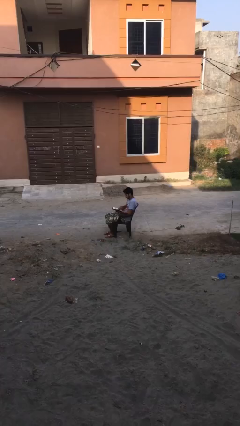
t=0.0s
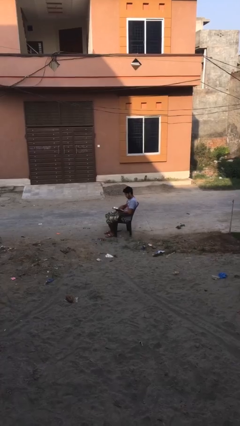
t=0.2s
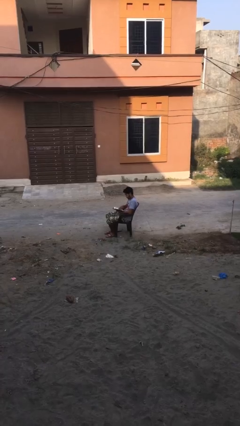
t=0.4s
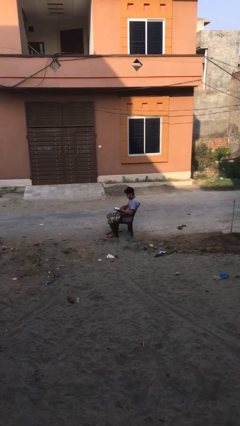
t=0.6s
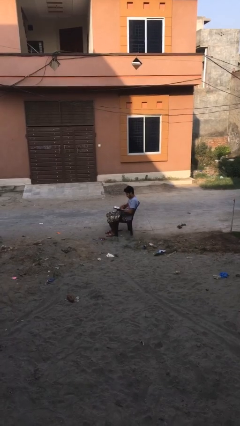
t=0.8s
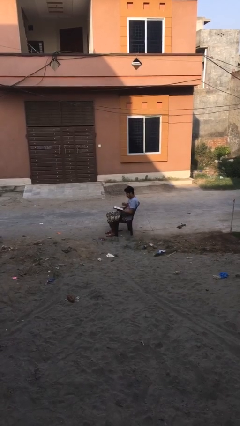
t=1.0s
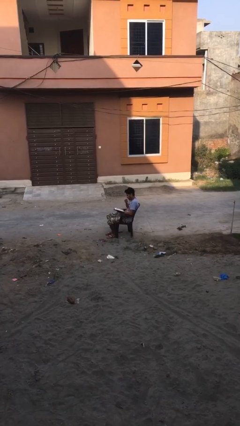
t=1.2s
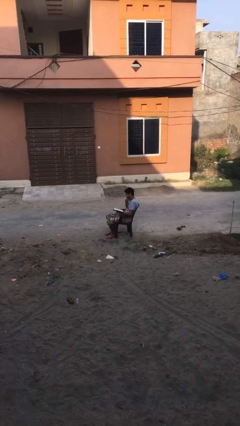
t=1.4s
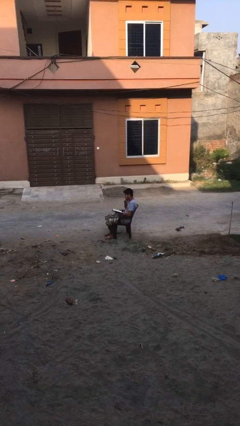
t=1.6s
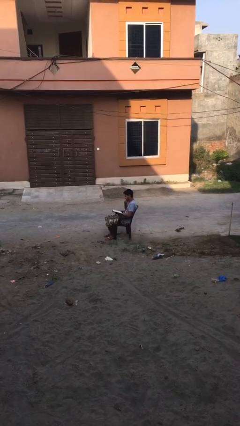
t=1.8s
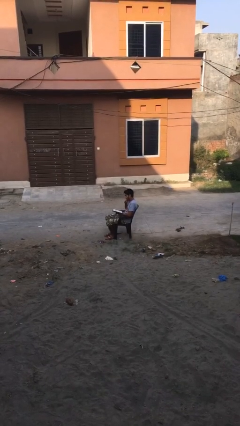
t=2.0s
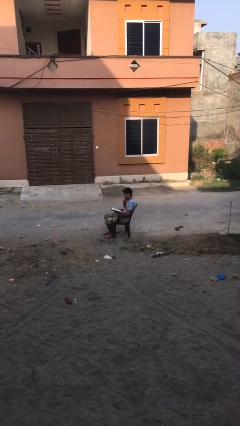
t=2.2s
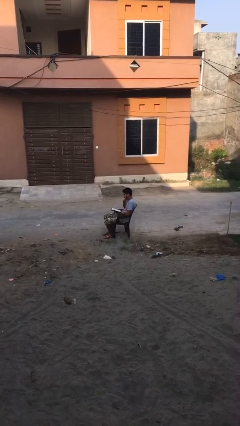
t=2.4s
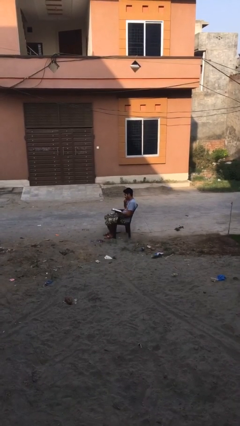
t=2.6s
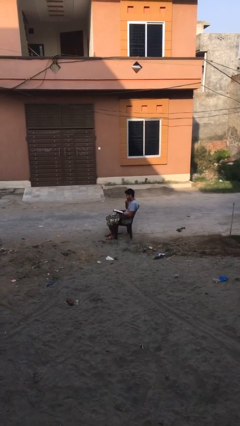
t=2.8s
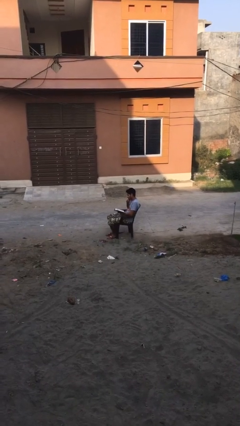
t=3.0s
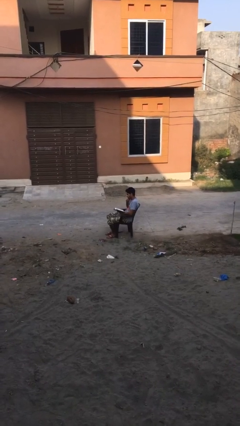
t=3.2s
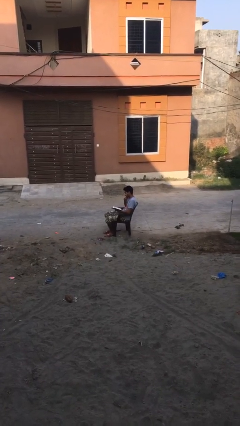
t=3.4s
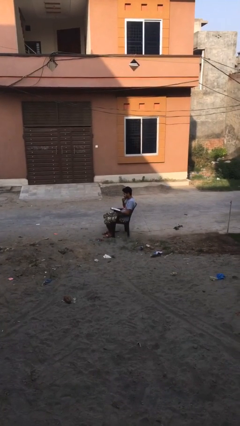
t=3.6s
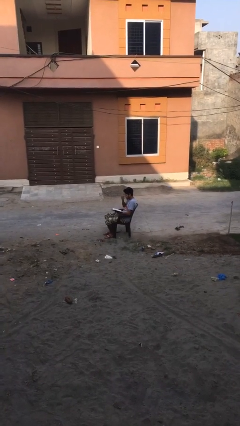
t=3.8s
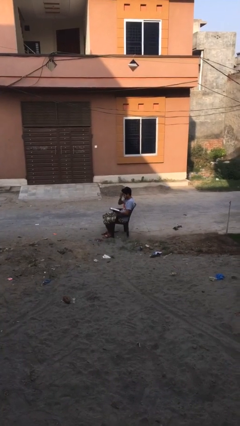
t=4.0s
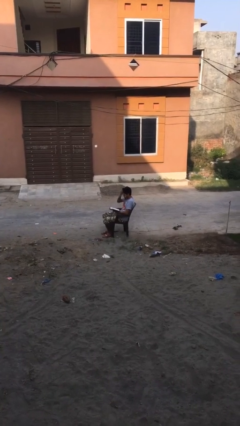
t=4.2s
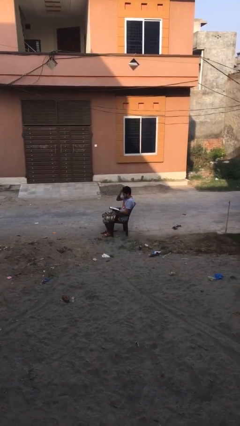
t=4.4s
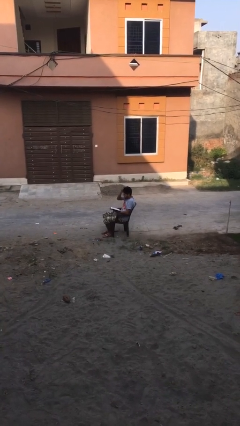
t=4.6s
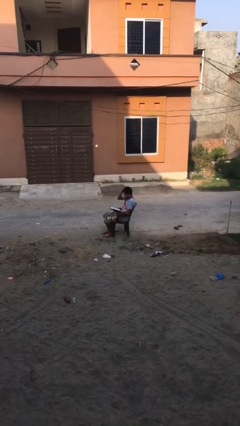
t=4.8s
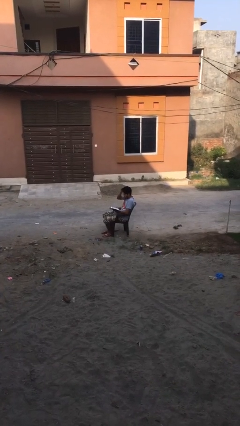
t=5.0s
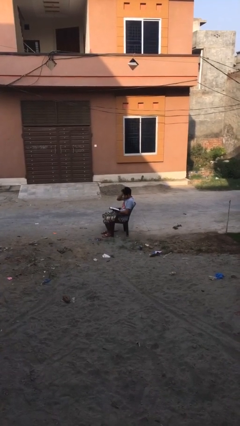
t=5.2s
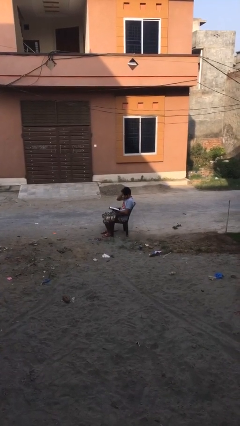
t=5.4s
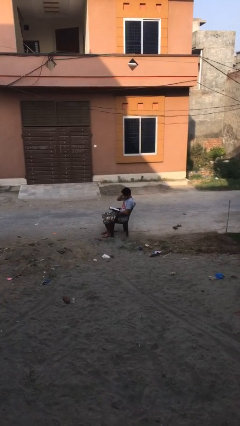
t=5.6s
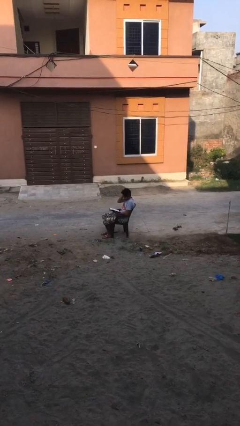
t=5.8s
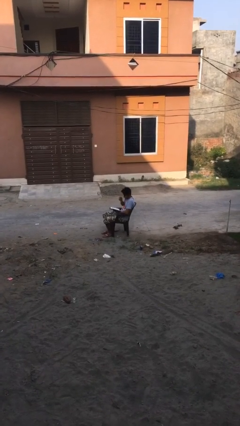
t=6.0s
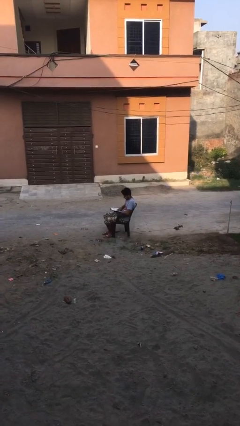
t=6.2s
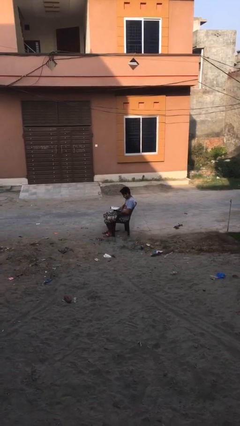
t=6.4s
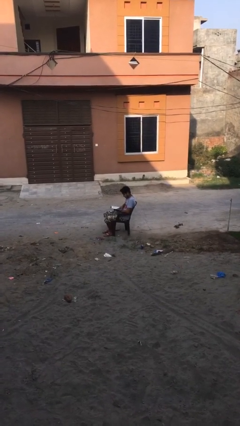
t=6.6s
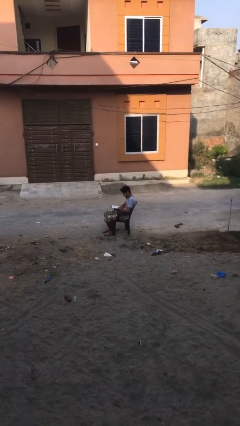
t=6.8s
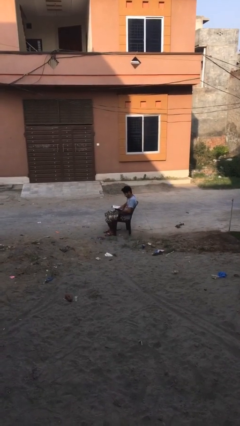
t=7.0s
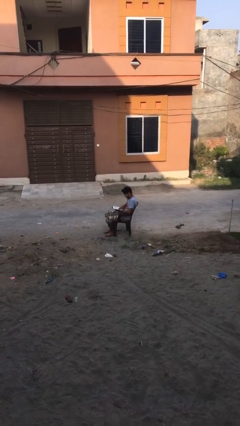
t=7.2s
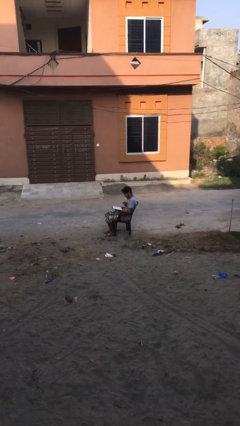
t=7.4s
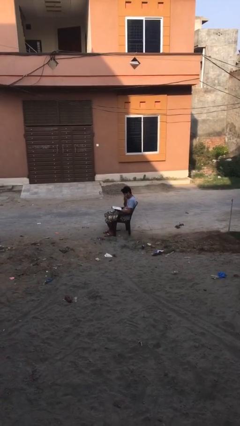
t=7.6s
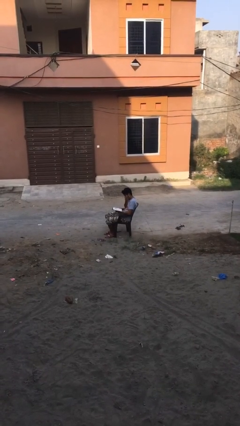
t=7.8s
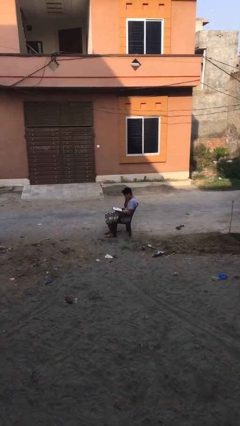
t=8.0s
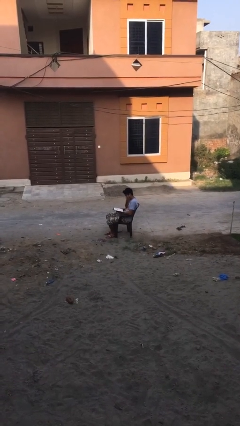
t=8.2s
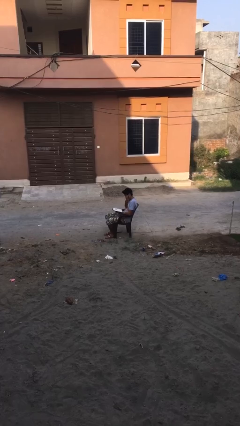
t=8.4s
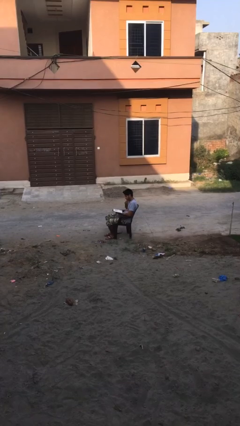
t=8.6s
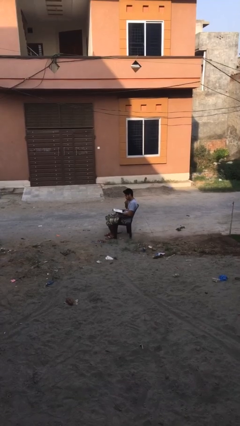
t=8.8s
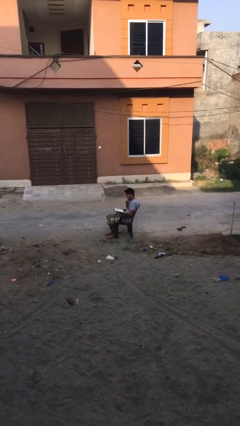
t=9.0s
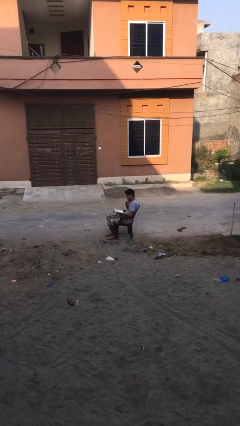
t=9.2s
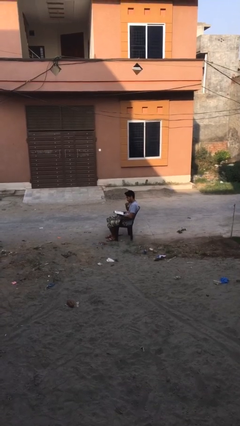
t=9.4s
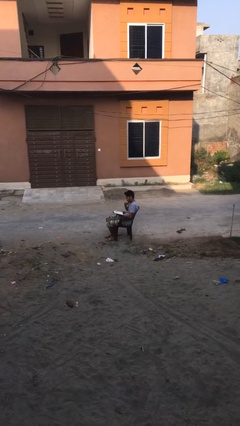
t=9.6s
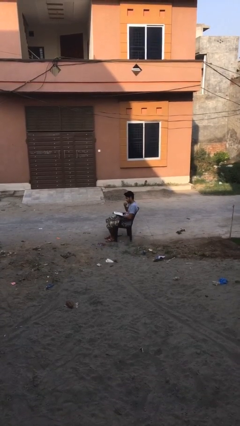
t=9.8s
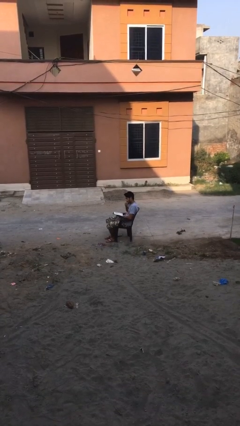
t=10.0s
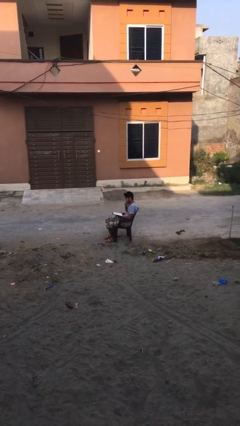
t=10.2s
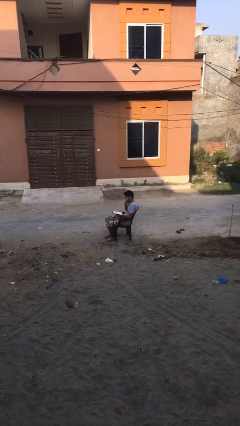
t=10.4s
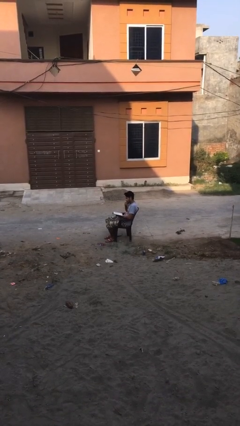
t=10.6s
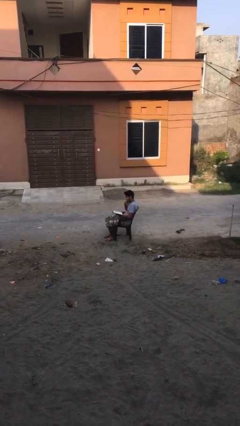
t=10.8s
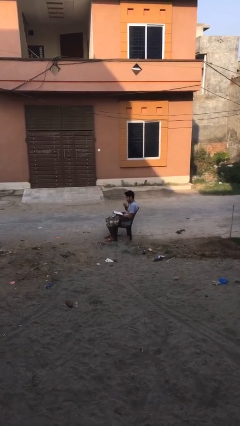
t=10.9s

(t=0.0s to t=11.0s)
person reads document

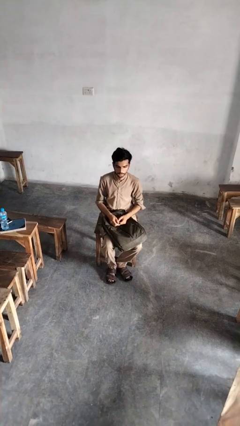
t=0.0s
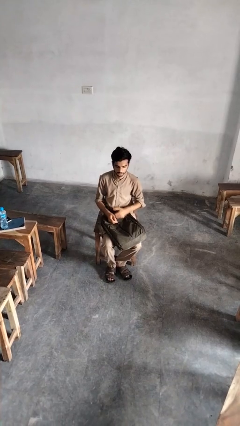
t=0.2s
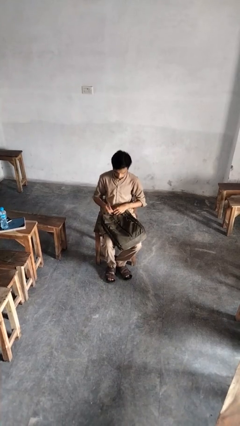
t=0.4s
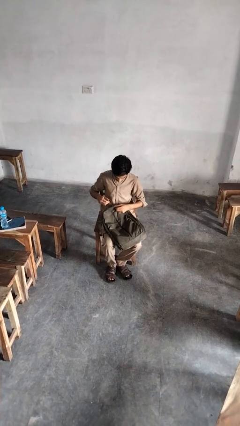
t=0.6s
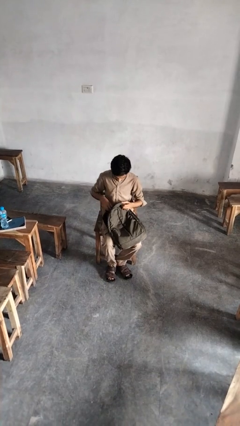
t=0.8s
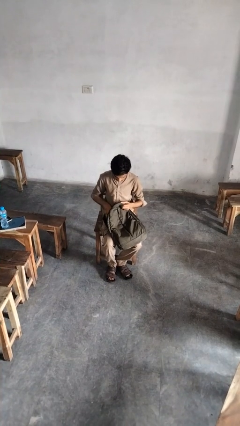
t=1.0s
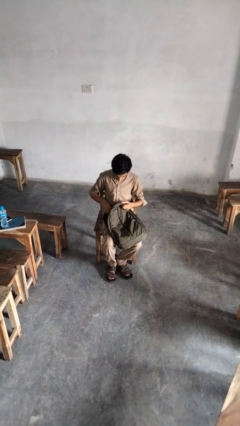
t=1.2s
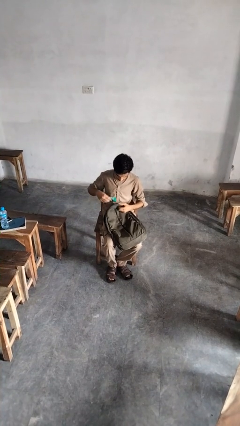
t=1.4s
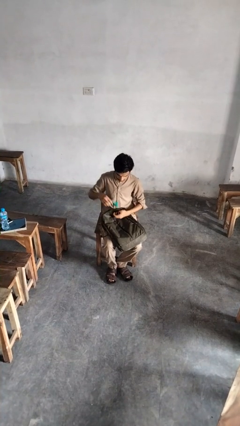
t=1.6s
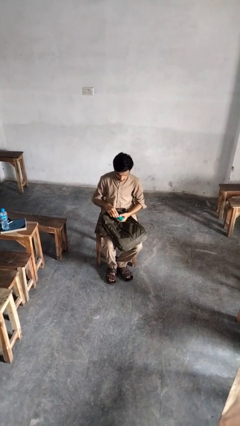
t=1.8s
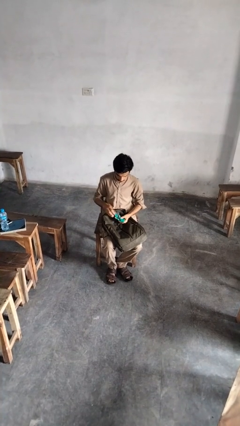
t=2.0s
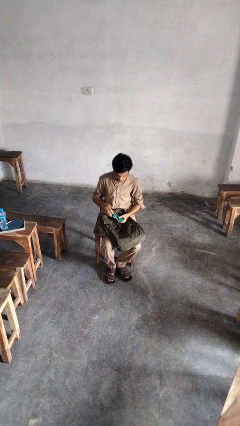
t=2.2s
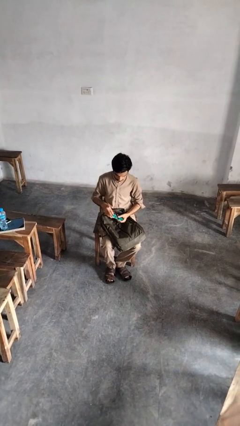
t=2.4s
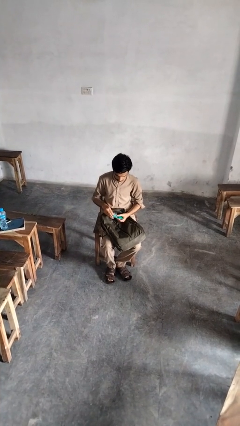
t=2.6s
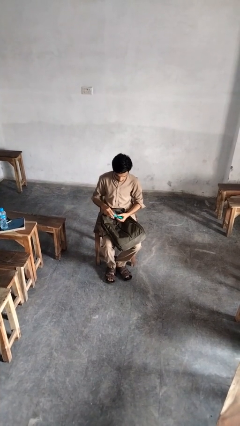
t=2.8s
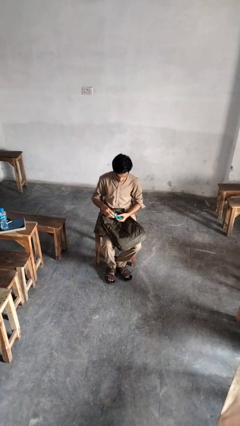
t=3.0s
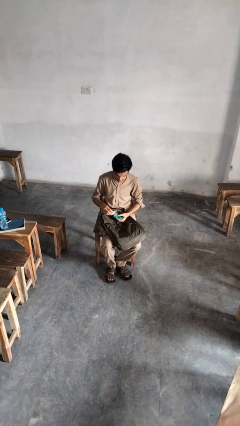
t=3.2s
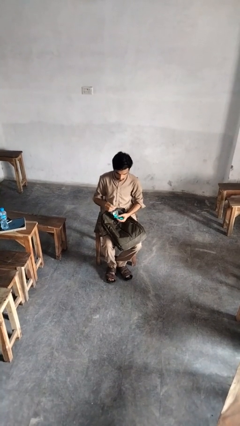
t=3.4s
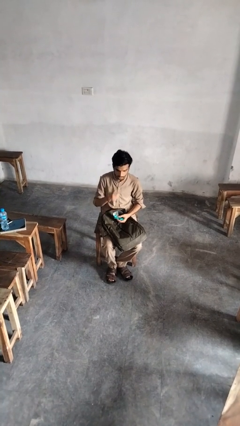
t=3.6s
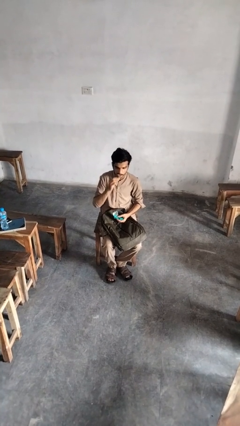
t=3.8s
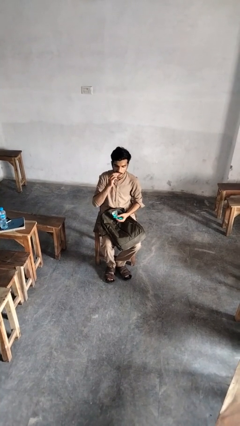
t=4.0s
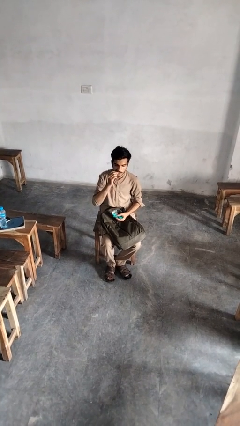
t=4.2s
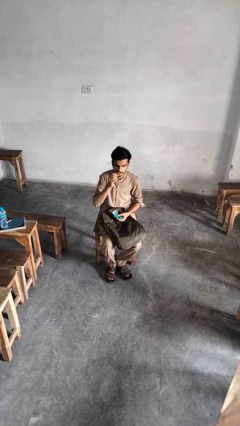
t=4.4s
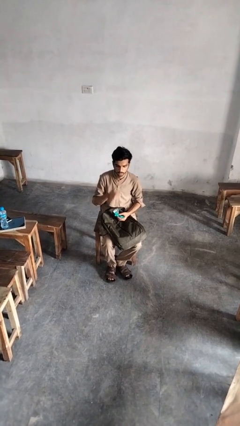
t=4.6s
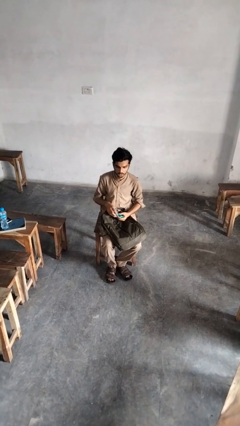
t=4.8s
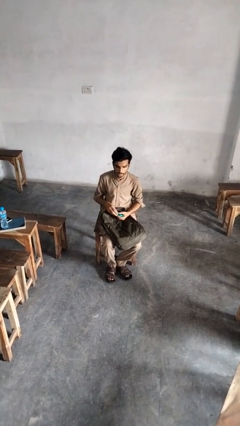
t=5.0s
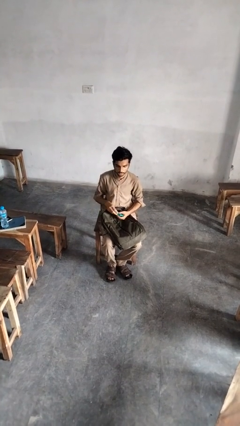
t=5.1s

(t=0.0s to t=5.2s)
person eats snack from bag

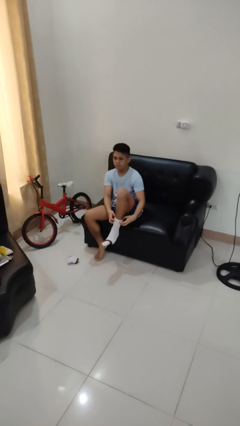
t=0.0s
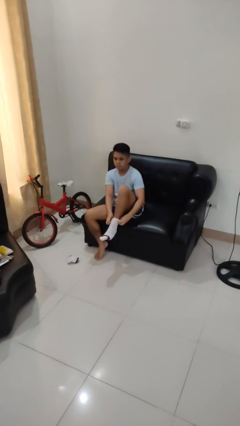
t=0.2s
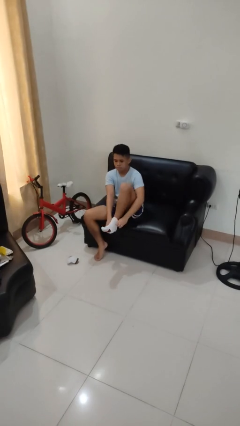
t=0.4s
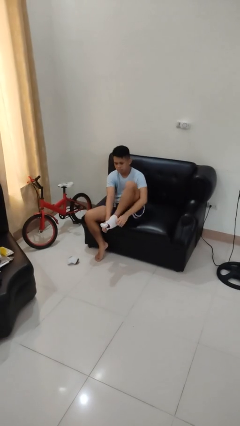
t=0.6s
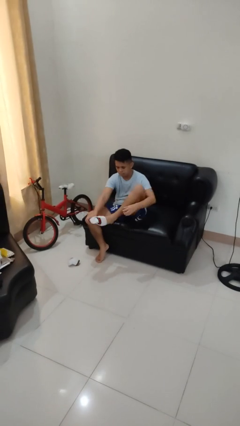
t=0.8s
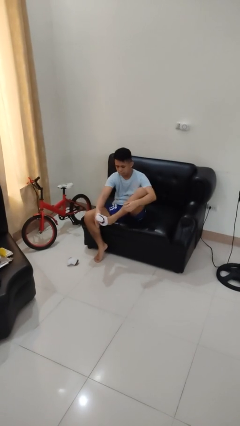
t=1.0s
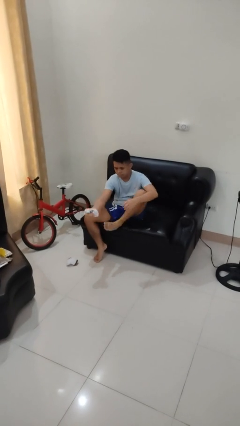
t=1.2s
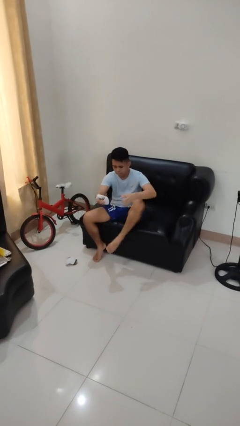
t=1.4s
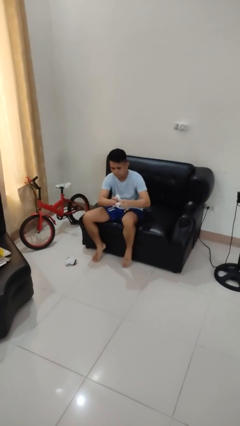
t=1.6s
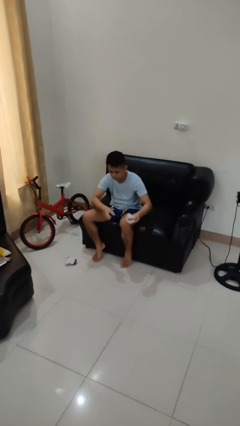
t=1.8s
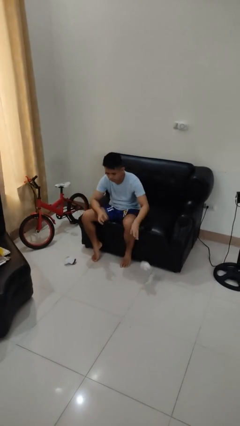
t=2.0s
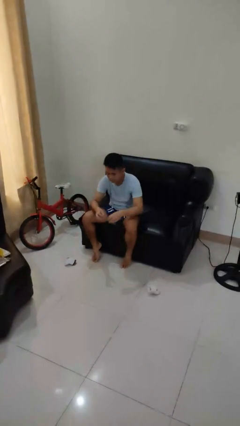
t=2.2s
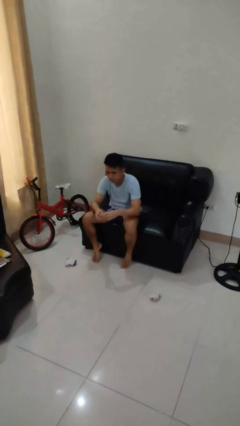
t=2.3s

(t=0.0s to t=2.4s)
person takes off socks
